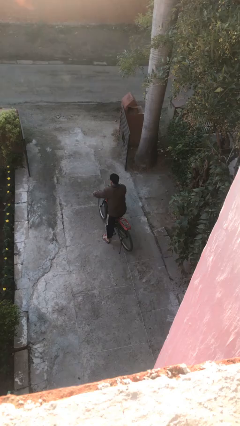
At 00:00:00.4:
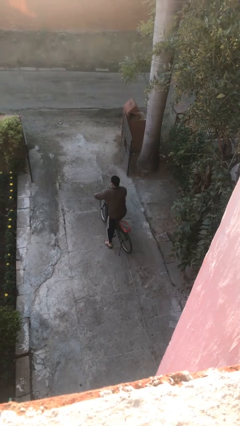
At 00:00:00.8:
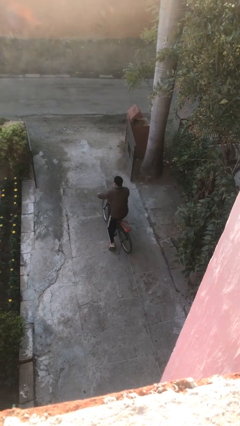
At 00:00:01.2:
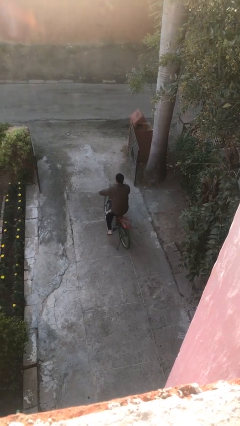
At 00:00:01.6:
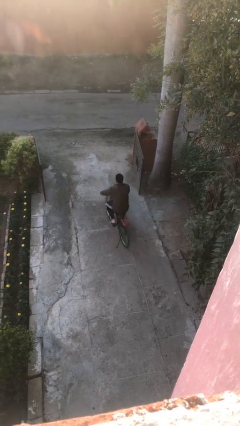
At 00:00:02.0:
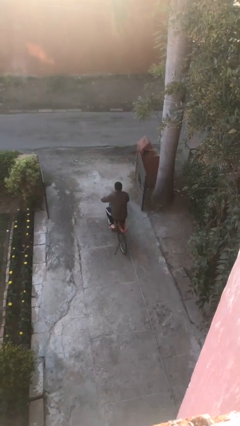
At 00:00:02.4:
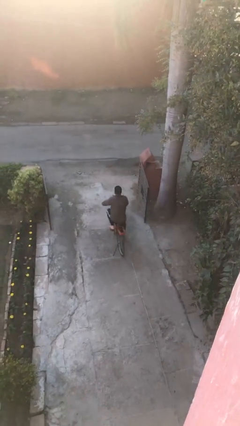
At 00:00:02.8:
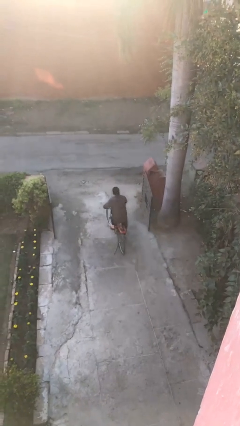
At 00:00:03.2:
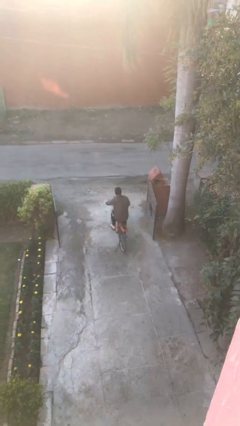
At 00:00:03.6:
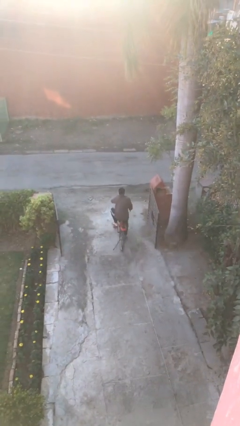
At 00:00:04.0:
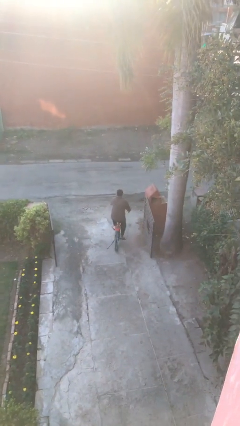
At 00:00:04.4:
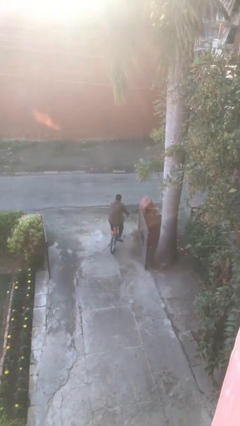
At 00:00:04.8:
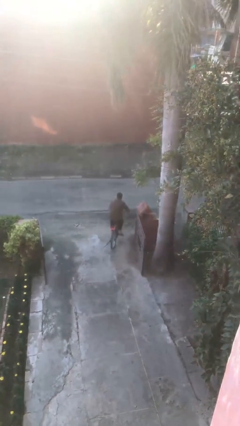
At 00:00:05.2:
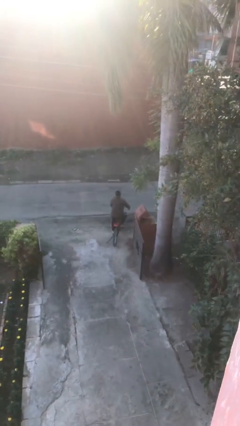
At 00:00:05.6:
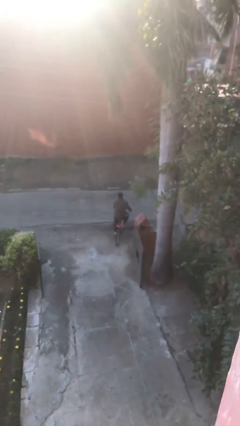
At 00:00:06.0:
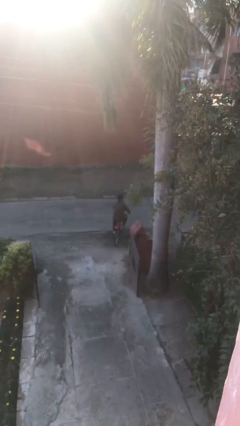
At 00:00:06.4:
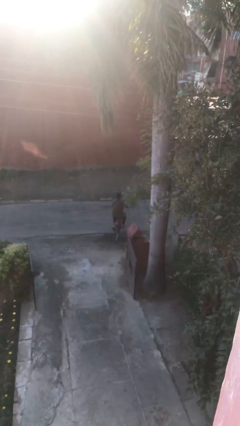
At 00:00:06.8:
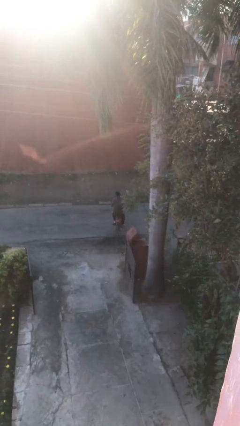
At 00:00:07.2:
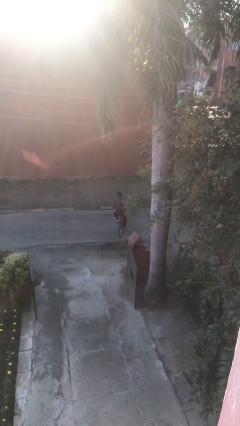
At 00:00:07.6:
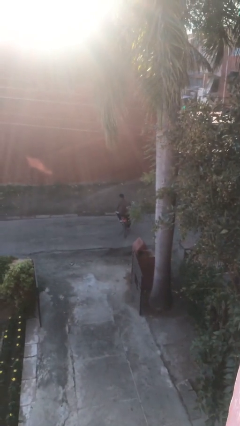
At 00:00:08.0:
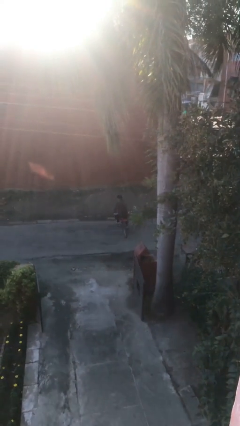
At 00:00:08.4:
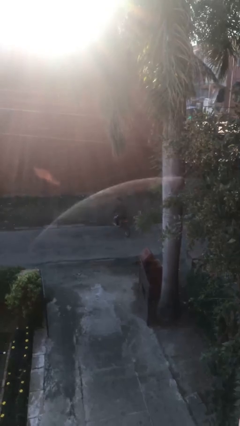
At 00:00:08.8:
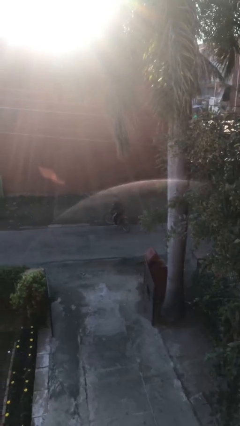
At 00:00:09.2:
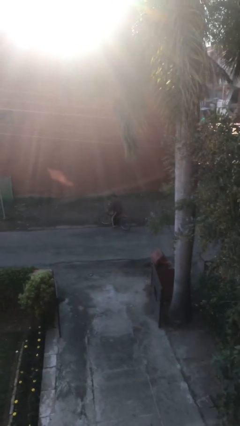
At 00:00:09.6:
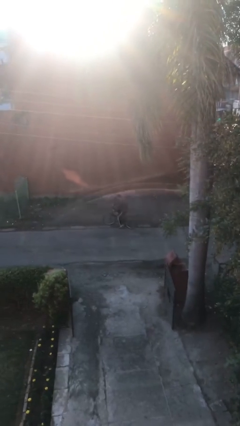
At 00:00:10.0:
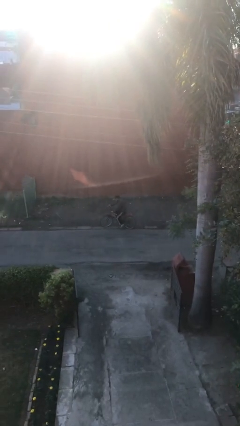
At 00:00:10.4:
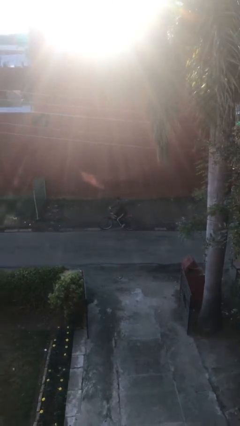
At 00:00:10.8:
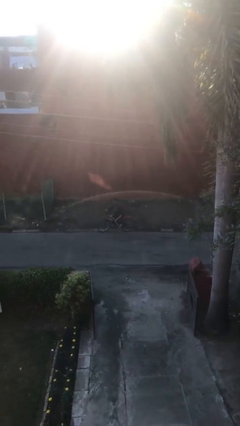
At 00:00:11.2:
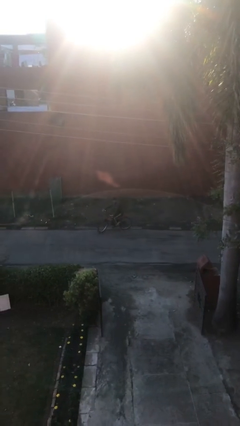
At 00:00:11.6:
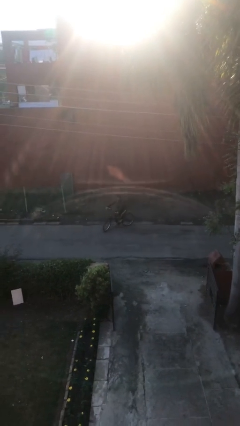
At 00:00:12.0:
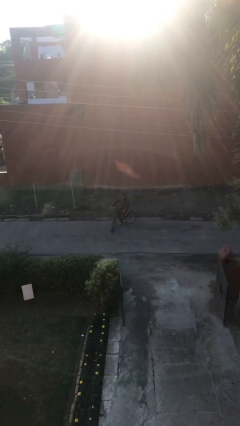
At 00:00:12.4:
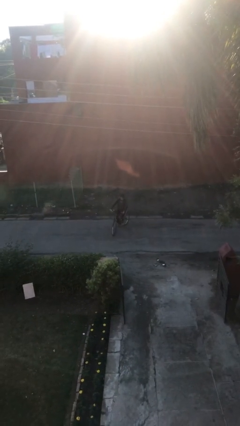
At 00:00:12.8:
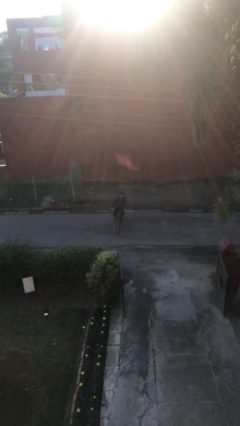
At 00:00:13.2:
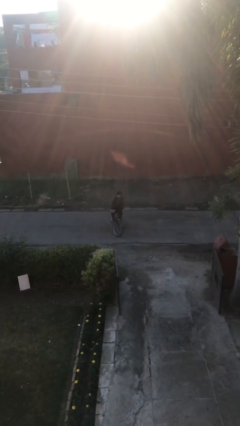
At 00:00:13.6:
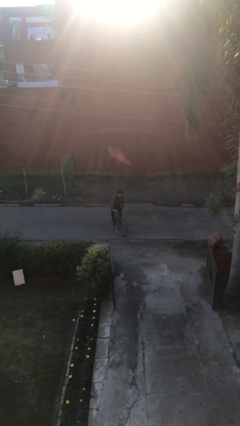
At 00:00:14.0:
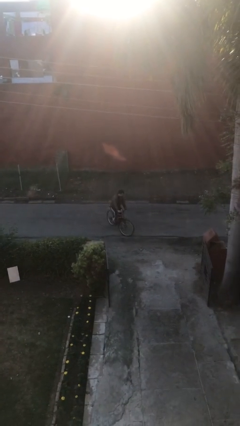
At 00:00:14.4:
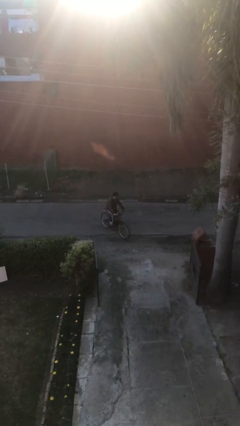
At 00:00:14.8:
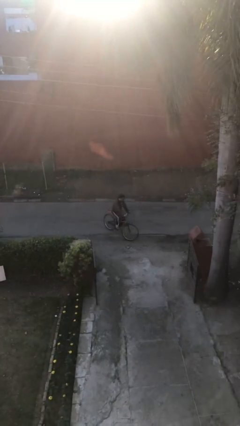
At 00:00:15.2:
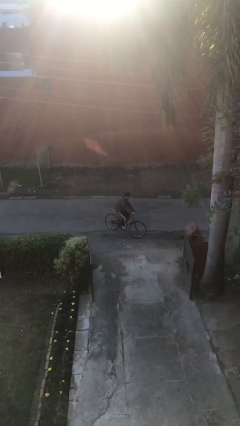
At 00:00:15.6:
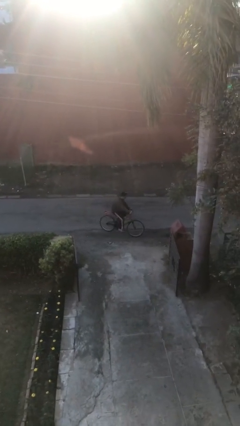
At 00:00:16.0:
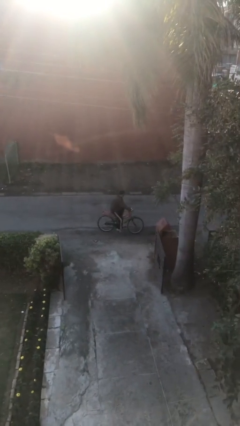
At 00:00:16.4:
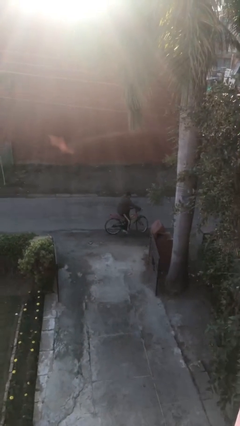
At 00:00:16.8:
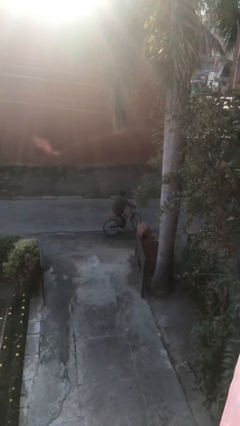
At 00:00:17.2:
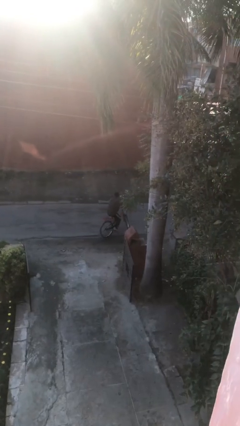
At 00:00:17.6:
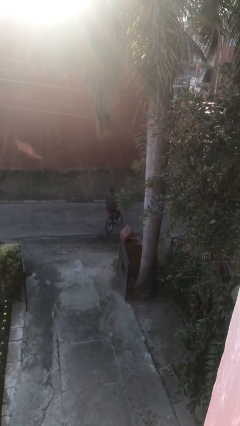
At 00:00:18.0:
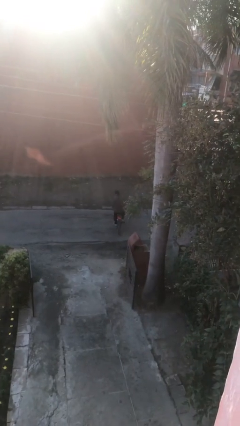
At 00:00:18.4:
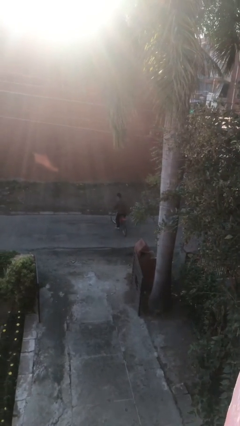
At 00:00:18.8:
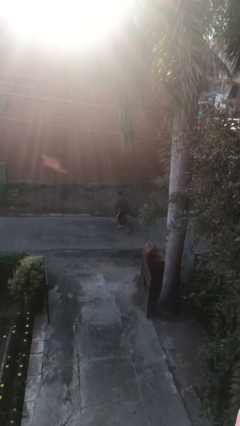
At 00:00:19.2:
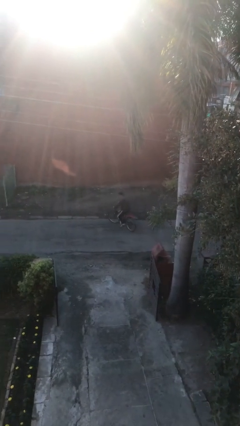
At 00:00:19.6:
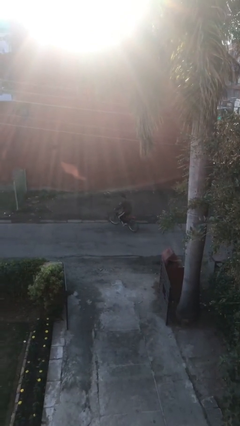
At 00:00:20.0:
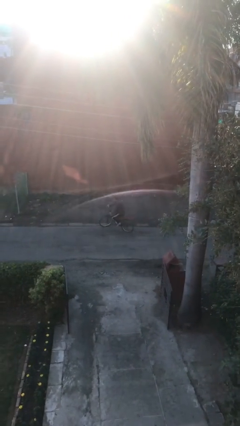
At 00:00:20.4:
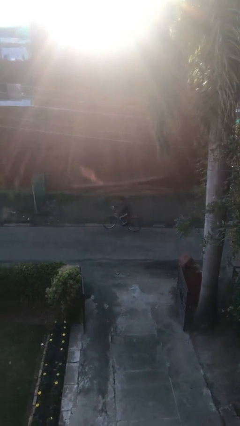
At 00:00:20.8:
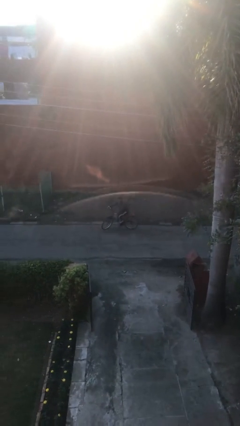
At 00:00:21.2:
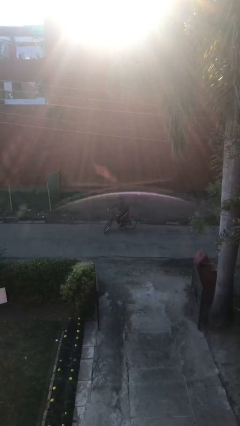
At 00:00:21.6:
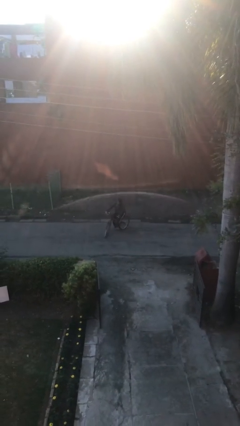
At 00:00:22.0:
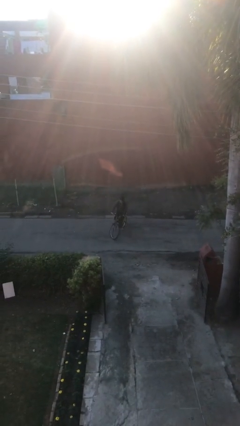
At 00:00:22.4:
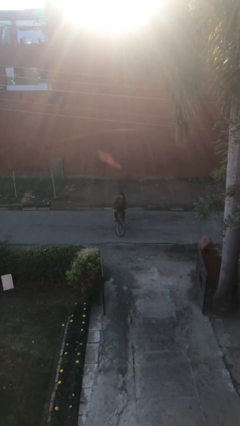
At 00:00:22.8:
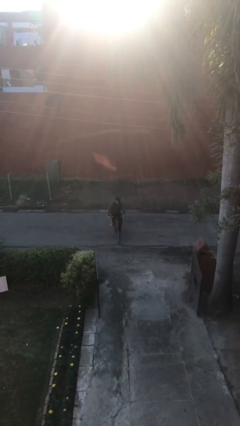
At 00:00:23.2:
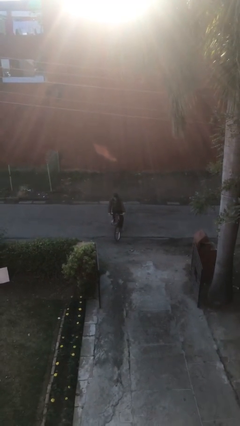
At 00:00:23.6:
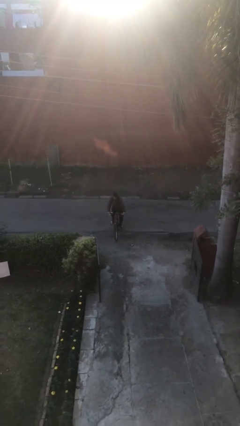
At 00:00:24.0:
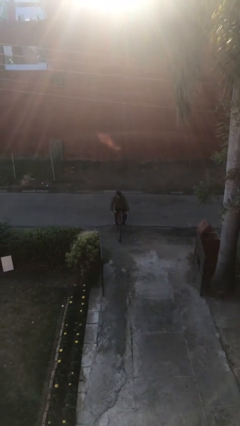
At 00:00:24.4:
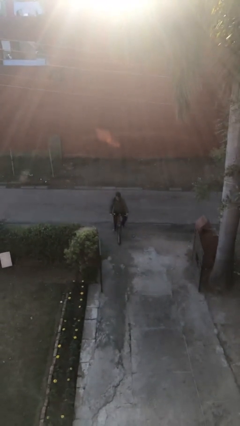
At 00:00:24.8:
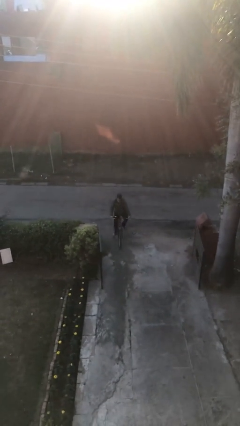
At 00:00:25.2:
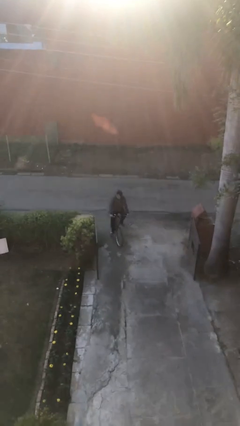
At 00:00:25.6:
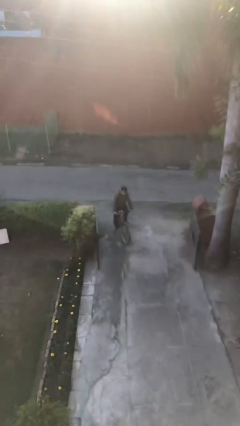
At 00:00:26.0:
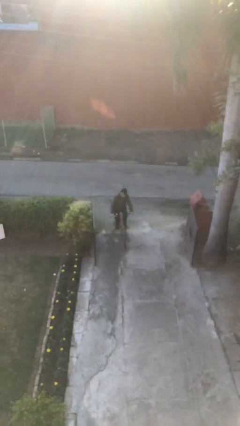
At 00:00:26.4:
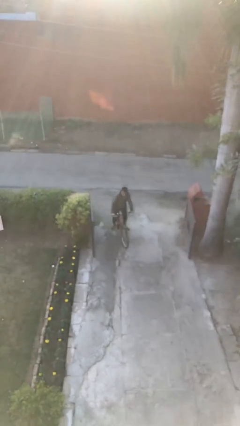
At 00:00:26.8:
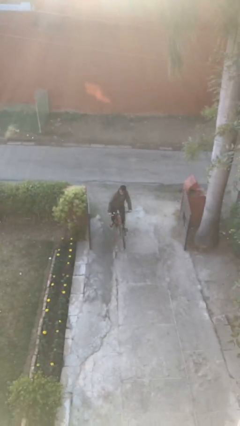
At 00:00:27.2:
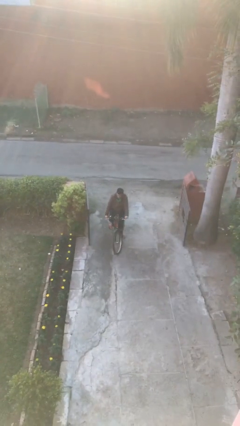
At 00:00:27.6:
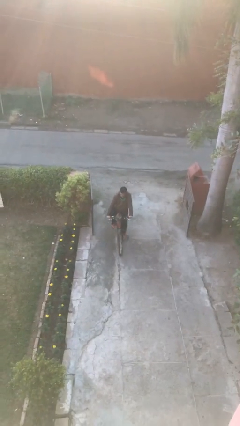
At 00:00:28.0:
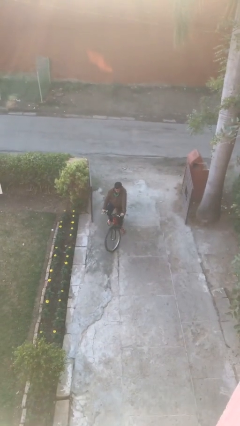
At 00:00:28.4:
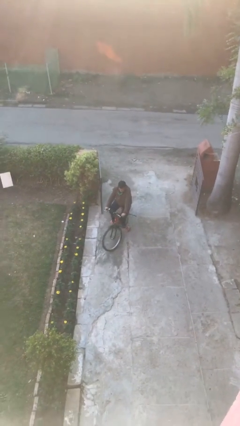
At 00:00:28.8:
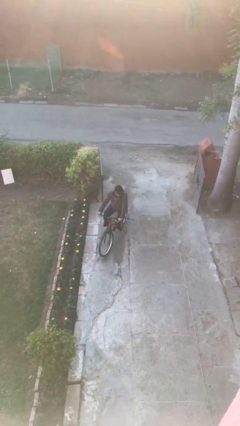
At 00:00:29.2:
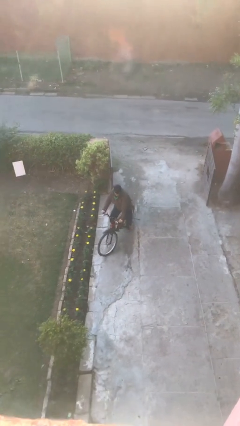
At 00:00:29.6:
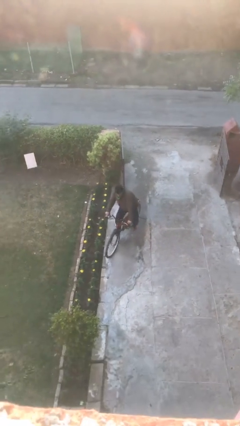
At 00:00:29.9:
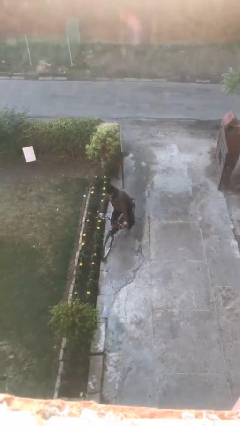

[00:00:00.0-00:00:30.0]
person rides bicycle

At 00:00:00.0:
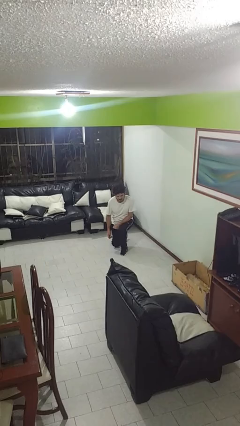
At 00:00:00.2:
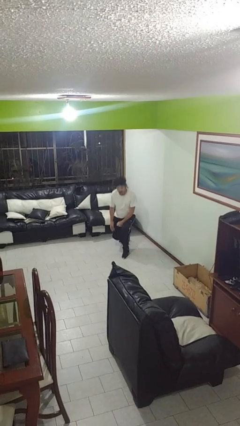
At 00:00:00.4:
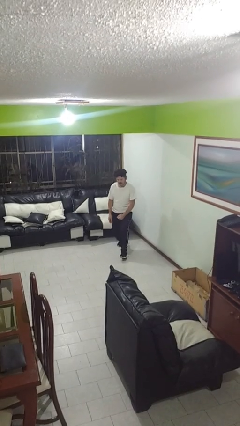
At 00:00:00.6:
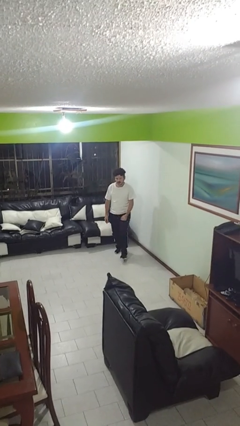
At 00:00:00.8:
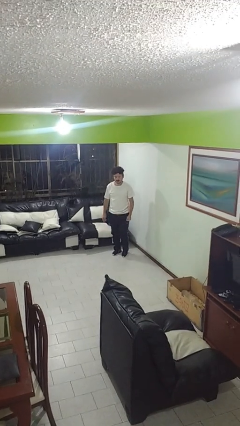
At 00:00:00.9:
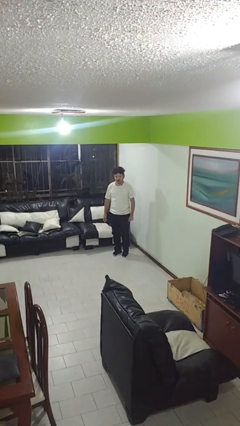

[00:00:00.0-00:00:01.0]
person stands up from floor

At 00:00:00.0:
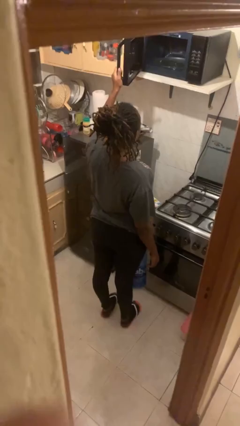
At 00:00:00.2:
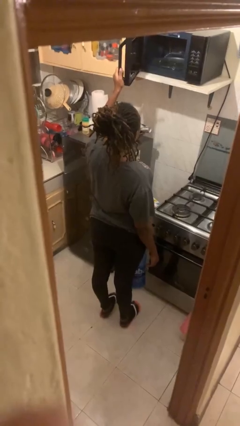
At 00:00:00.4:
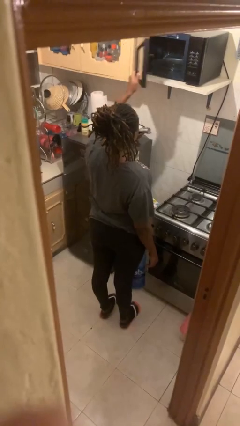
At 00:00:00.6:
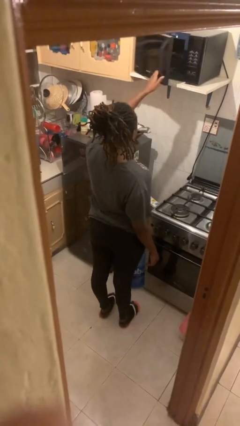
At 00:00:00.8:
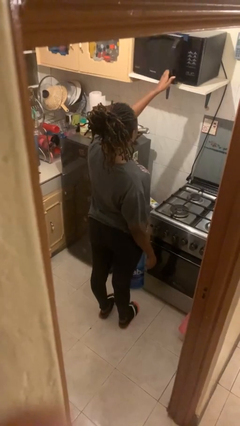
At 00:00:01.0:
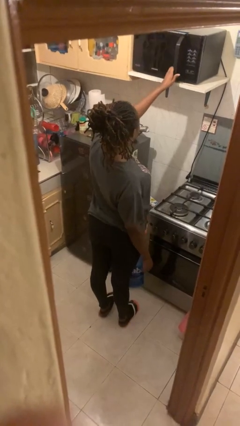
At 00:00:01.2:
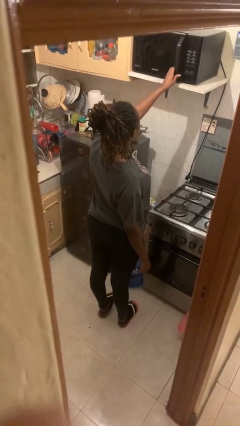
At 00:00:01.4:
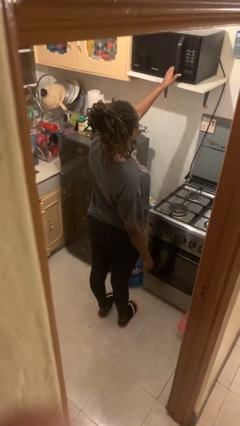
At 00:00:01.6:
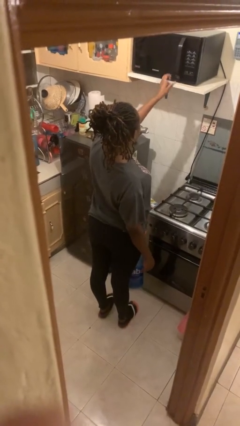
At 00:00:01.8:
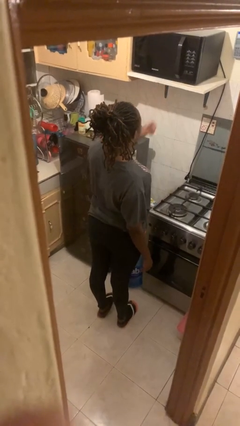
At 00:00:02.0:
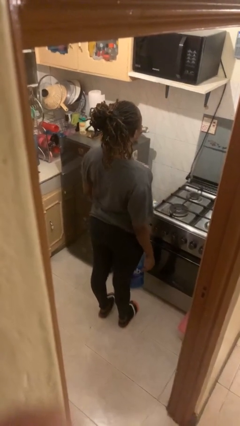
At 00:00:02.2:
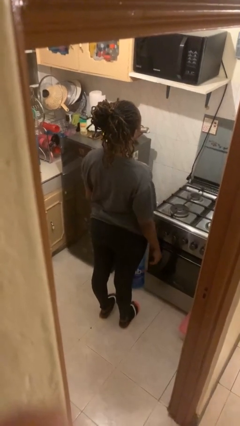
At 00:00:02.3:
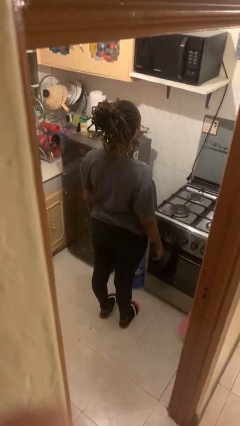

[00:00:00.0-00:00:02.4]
person closes microwave
